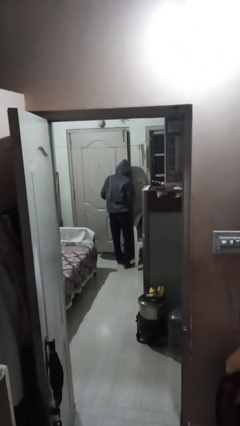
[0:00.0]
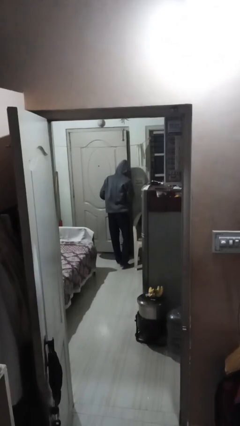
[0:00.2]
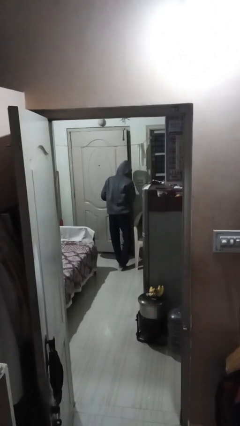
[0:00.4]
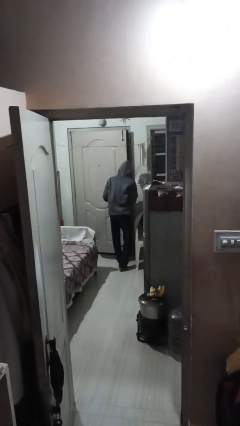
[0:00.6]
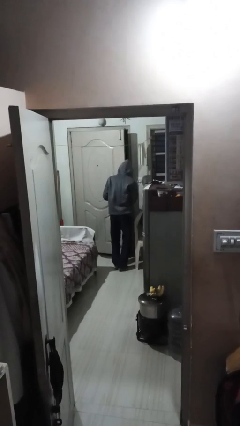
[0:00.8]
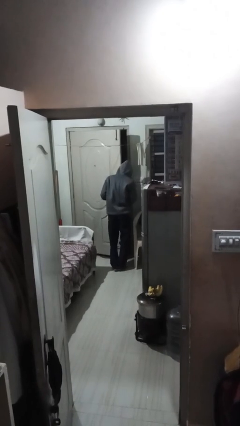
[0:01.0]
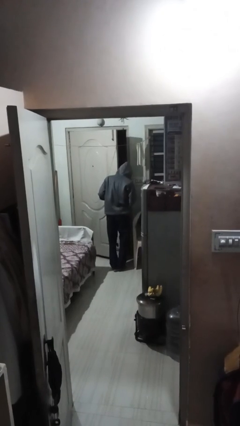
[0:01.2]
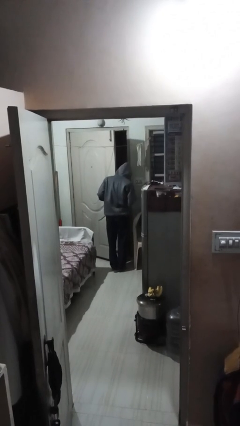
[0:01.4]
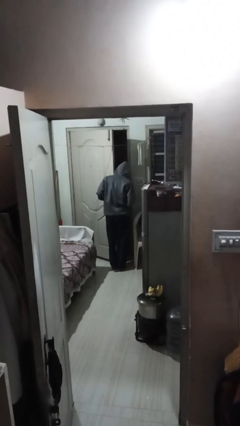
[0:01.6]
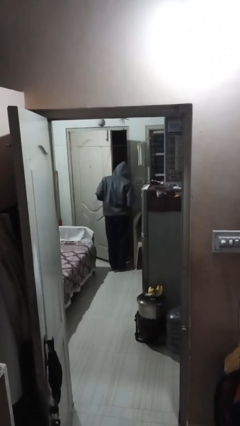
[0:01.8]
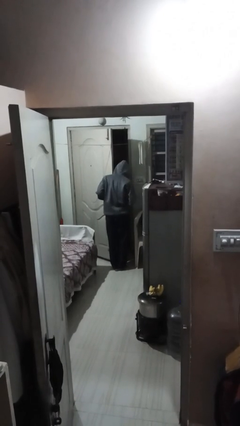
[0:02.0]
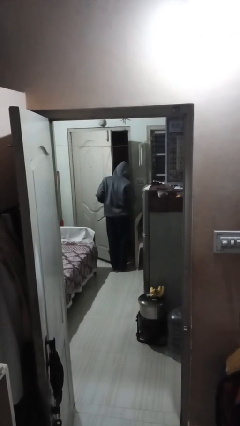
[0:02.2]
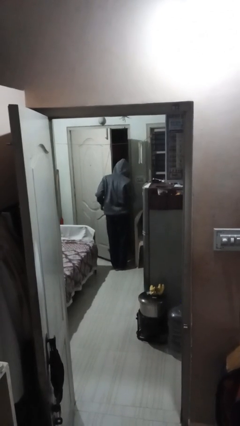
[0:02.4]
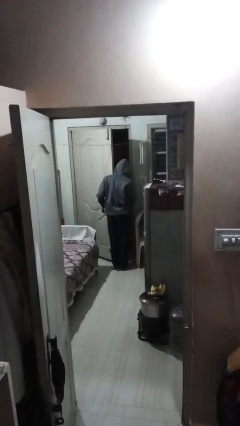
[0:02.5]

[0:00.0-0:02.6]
person opens facility door

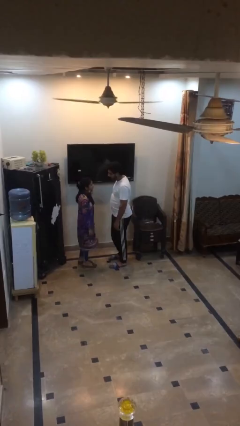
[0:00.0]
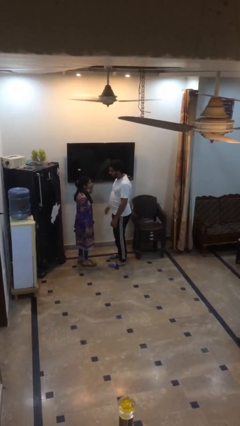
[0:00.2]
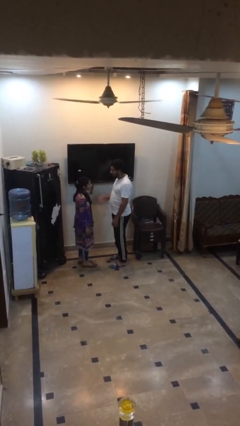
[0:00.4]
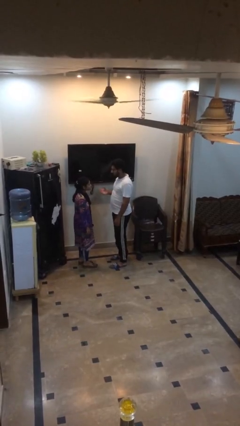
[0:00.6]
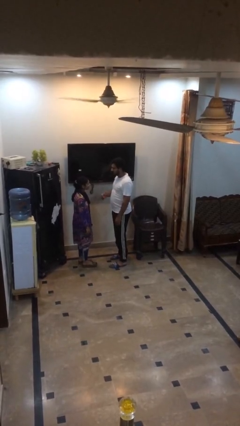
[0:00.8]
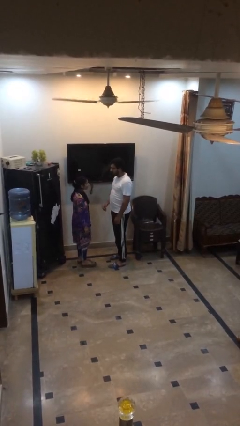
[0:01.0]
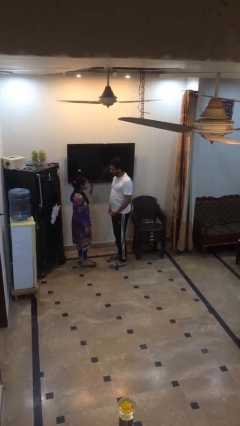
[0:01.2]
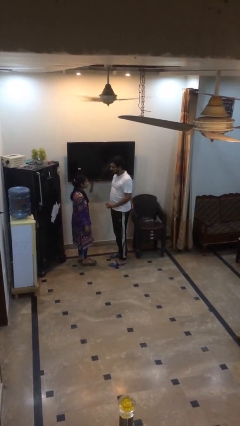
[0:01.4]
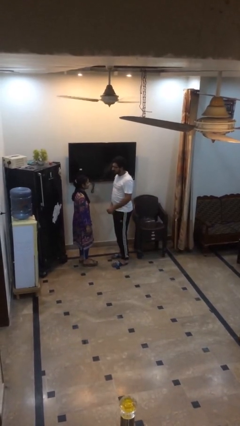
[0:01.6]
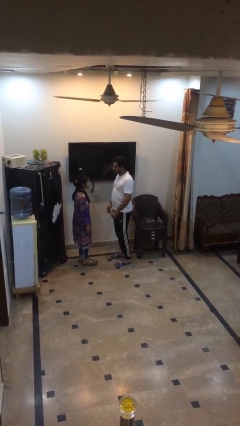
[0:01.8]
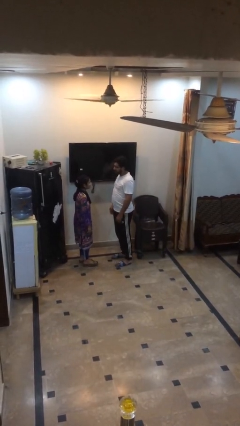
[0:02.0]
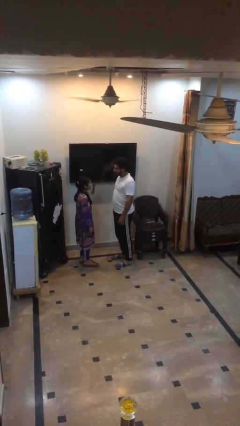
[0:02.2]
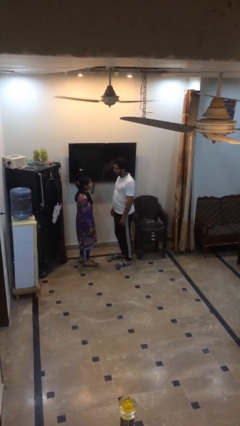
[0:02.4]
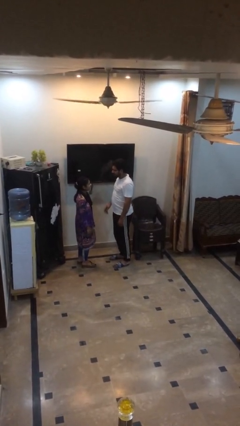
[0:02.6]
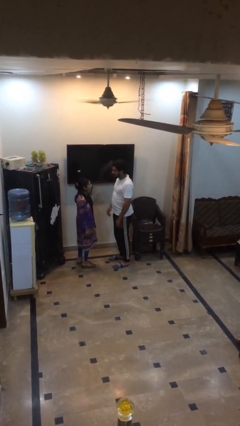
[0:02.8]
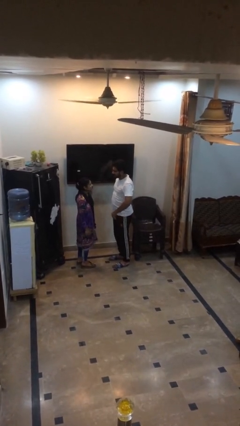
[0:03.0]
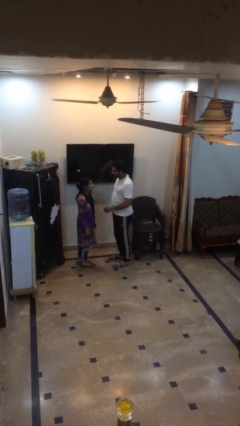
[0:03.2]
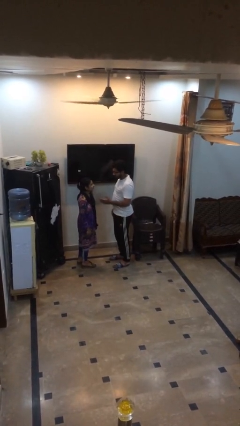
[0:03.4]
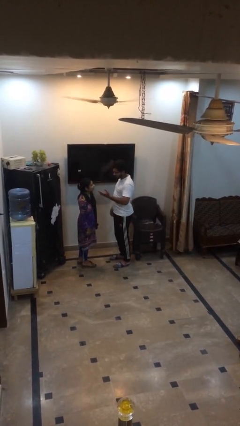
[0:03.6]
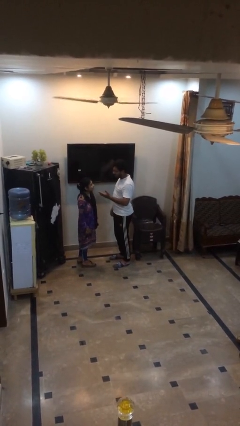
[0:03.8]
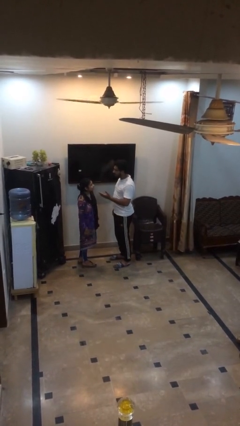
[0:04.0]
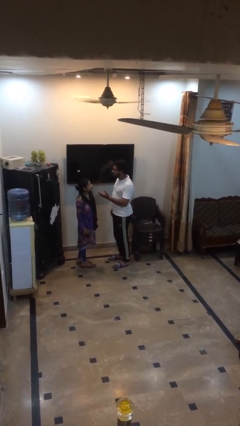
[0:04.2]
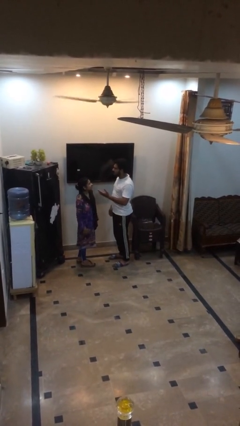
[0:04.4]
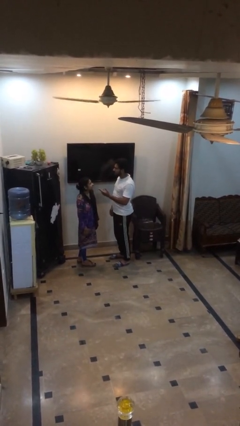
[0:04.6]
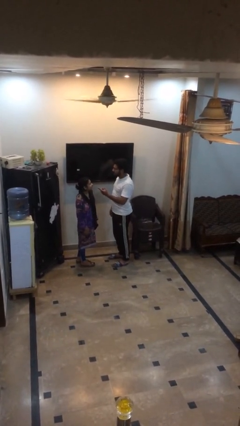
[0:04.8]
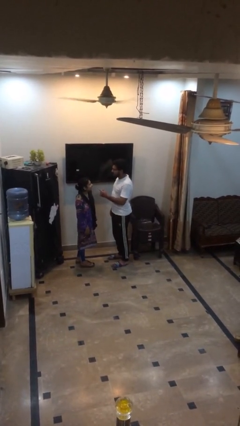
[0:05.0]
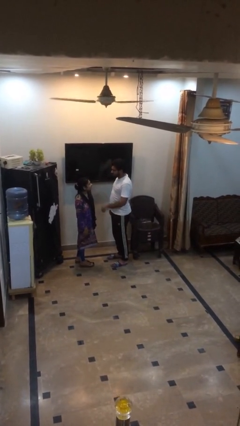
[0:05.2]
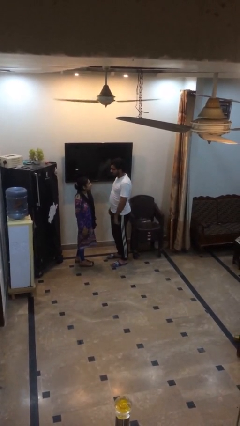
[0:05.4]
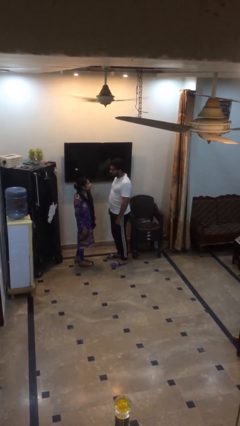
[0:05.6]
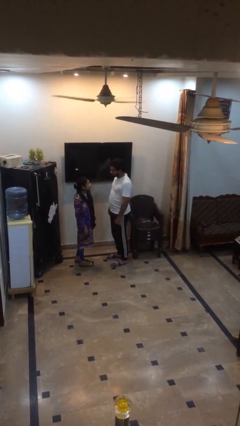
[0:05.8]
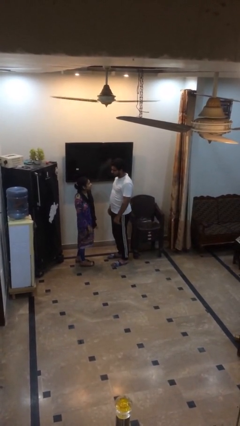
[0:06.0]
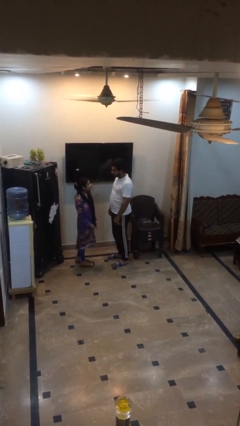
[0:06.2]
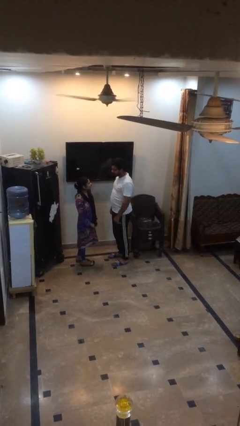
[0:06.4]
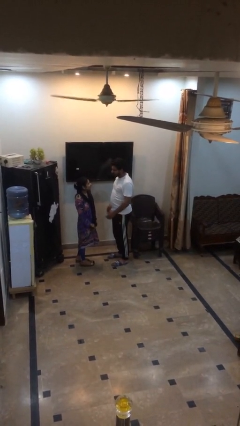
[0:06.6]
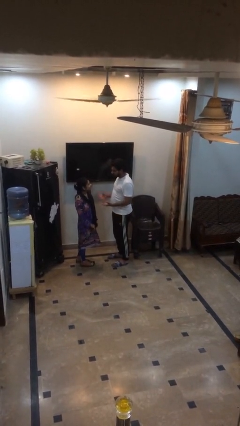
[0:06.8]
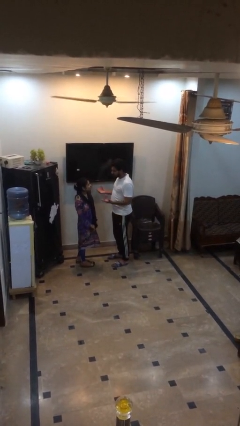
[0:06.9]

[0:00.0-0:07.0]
person talks to person

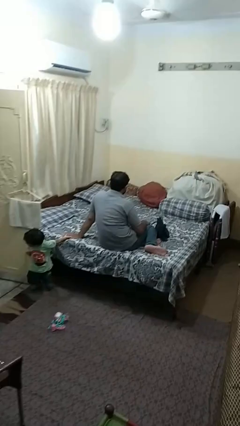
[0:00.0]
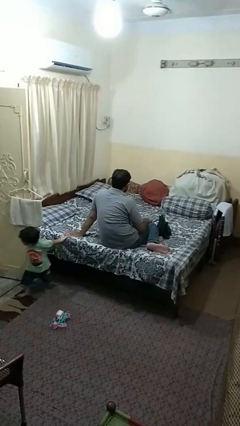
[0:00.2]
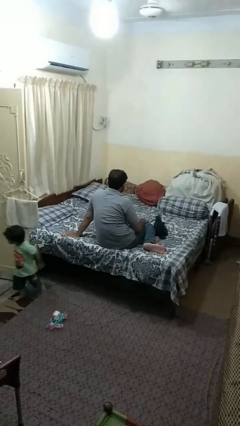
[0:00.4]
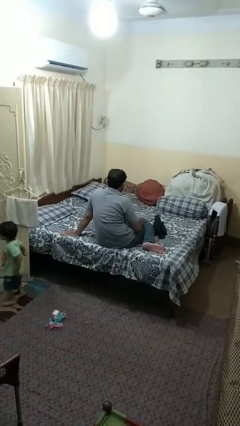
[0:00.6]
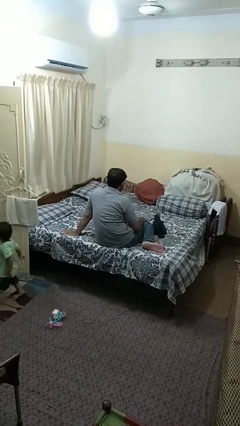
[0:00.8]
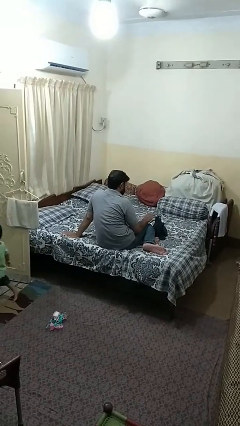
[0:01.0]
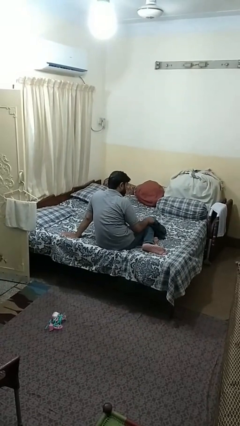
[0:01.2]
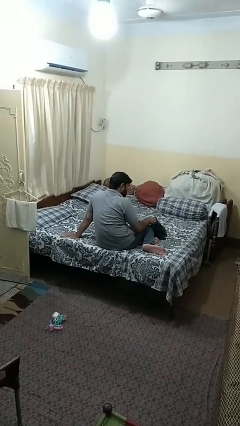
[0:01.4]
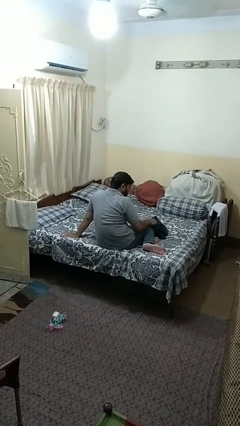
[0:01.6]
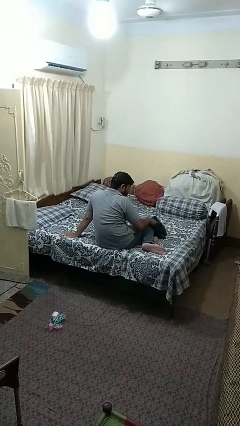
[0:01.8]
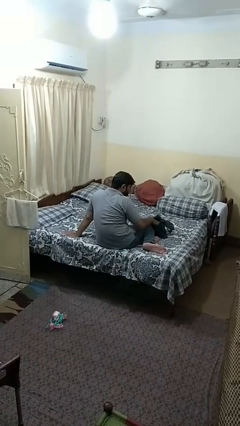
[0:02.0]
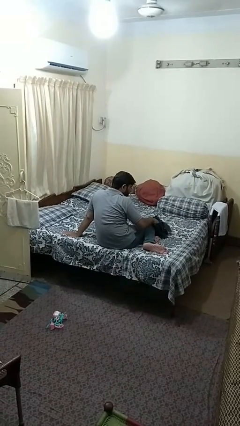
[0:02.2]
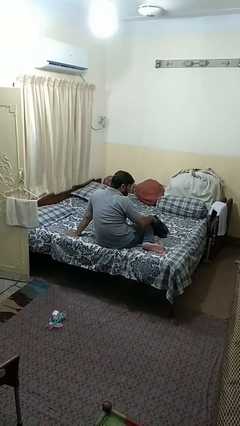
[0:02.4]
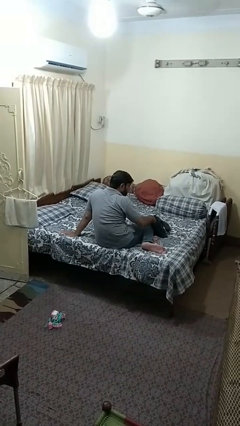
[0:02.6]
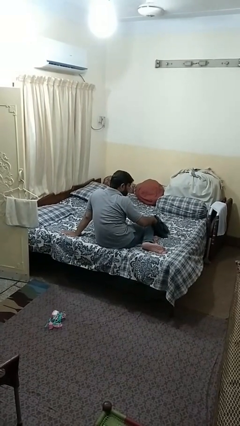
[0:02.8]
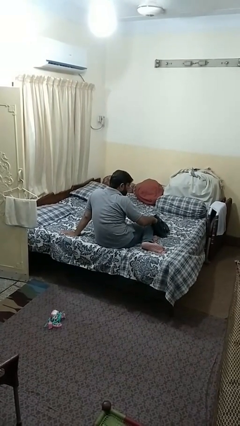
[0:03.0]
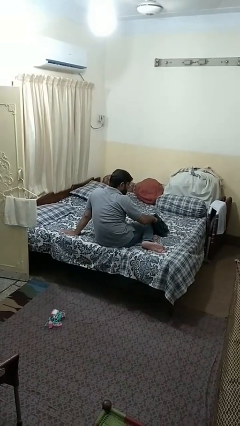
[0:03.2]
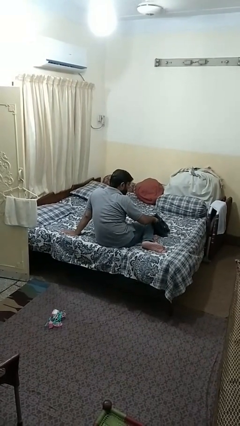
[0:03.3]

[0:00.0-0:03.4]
person searches in purse

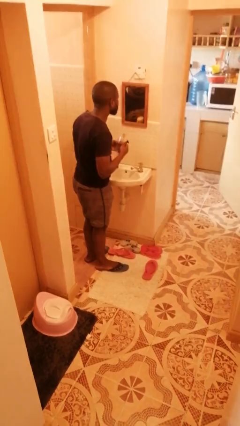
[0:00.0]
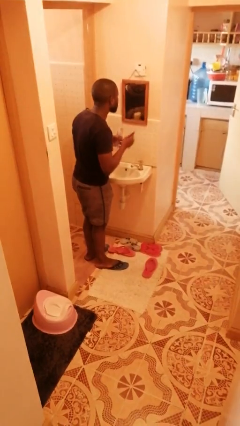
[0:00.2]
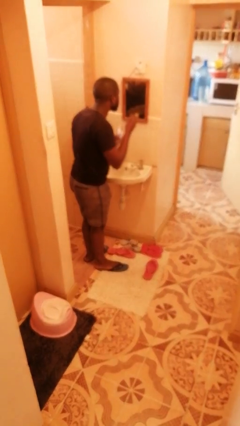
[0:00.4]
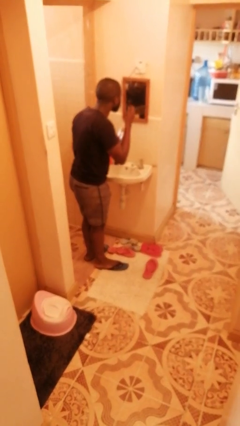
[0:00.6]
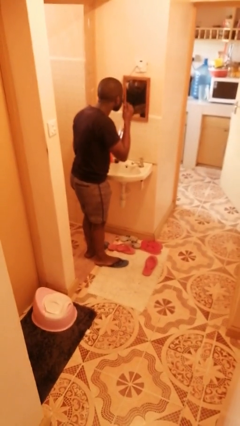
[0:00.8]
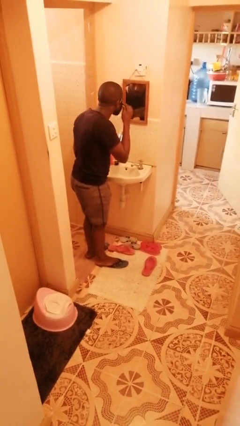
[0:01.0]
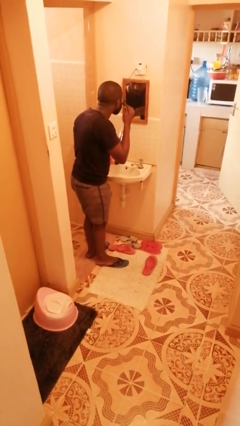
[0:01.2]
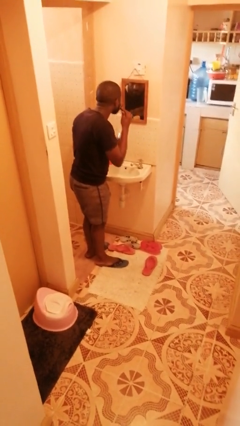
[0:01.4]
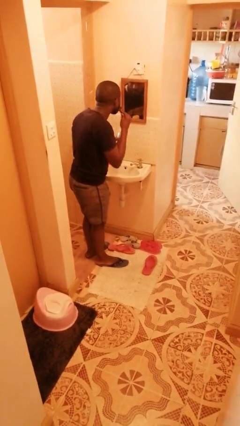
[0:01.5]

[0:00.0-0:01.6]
person shaves face

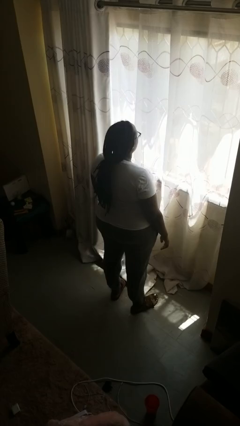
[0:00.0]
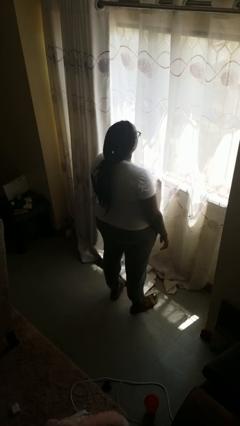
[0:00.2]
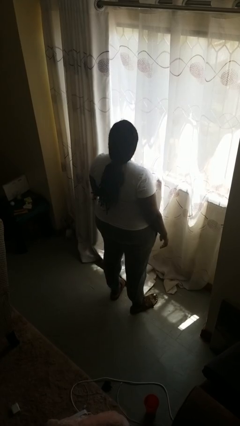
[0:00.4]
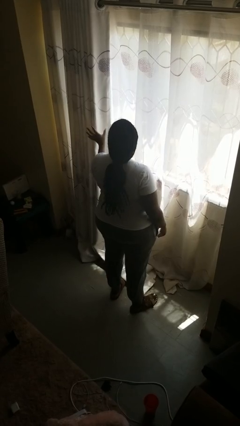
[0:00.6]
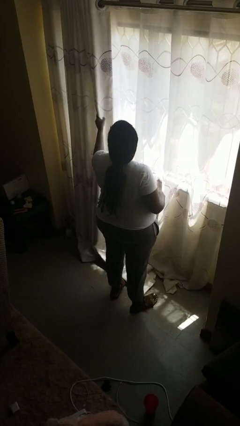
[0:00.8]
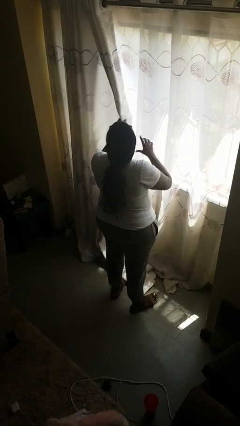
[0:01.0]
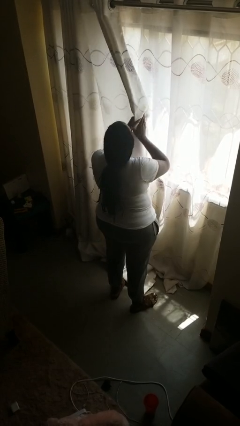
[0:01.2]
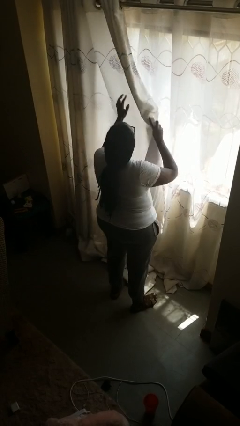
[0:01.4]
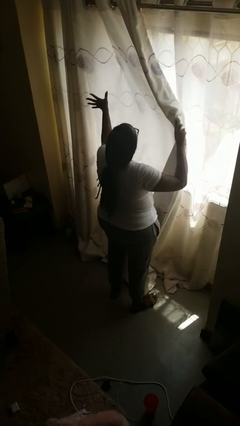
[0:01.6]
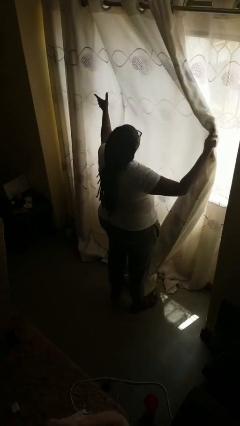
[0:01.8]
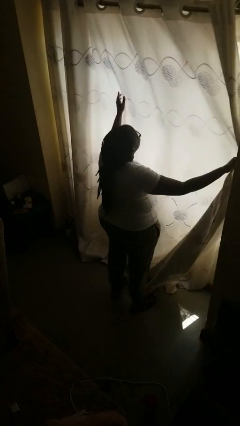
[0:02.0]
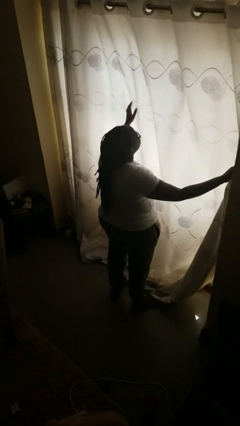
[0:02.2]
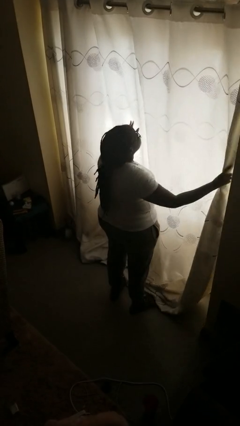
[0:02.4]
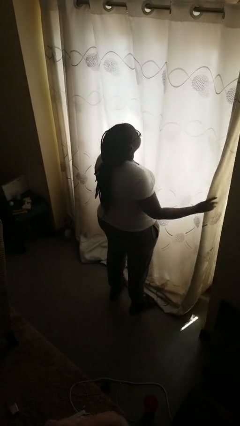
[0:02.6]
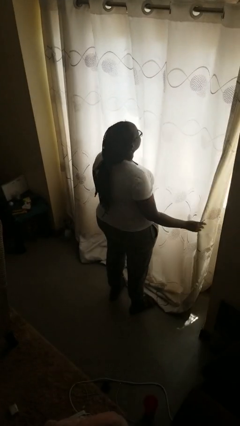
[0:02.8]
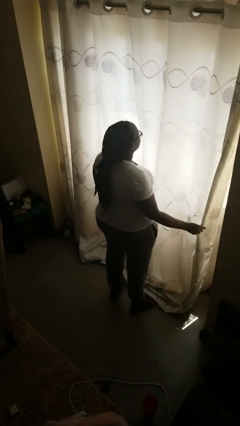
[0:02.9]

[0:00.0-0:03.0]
person closes curtains
